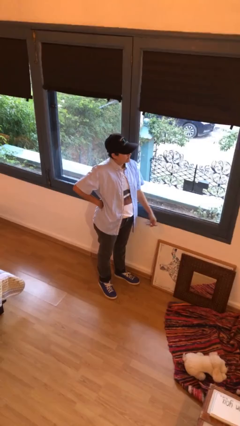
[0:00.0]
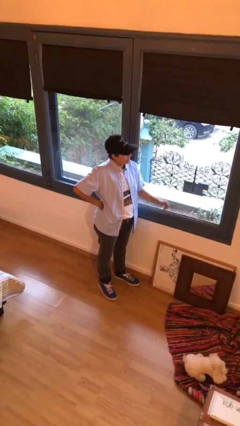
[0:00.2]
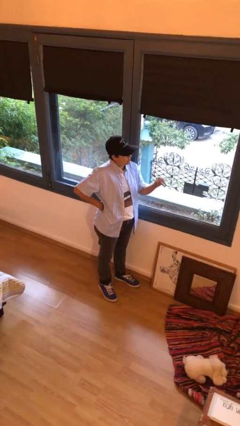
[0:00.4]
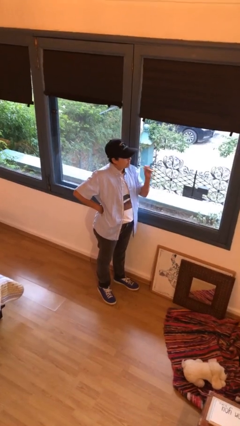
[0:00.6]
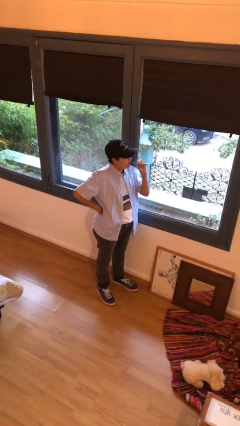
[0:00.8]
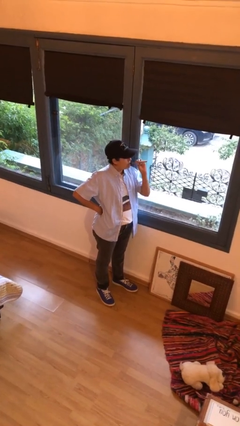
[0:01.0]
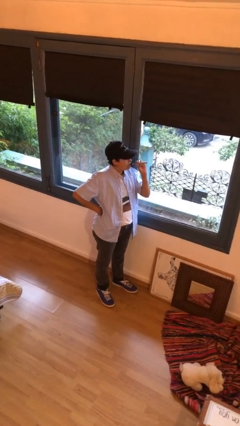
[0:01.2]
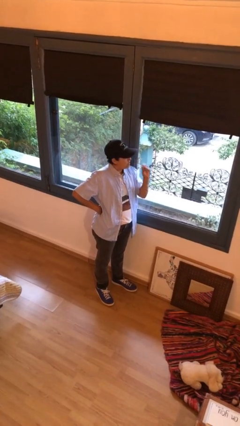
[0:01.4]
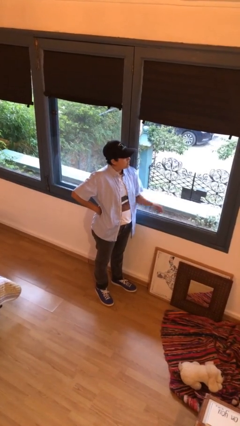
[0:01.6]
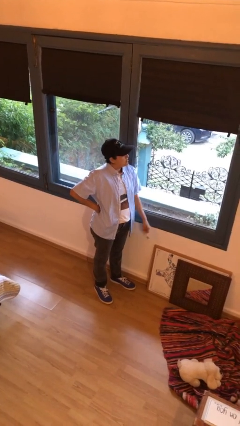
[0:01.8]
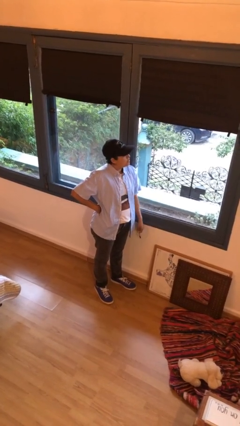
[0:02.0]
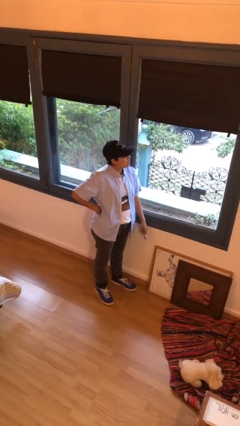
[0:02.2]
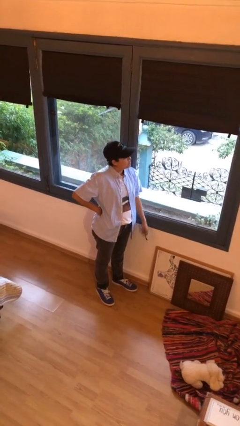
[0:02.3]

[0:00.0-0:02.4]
person vapes

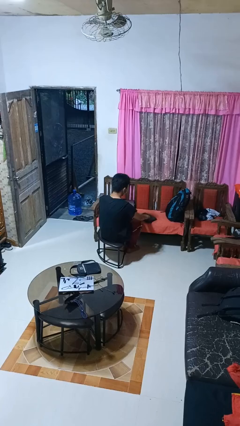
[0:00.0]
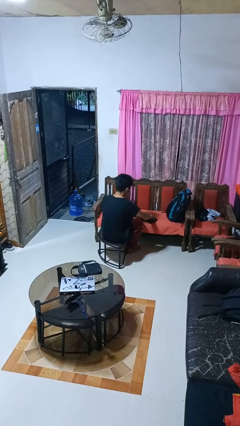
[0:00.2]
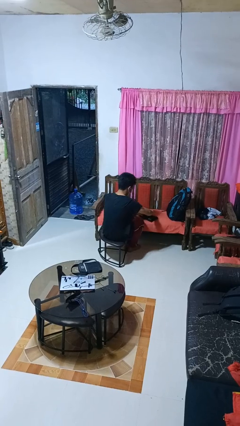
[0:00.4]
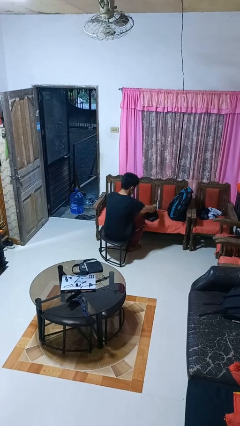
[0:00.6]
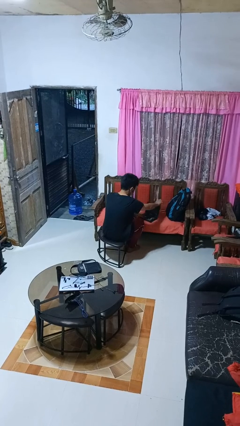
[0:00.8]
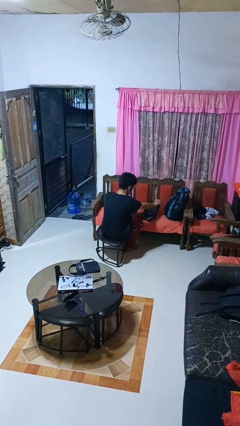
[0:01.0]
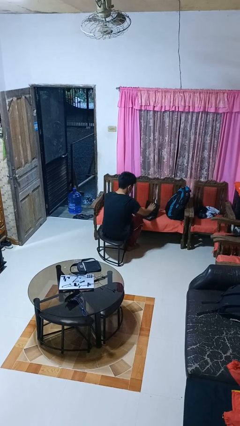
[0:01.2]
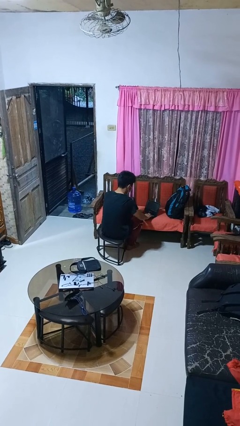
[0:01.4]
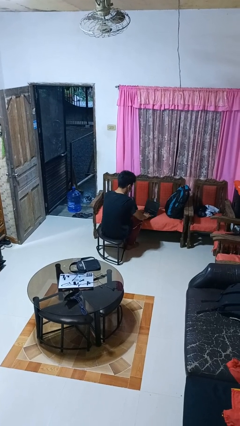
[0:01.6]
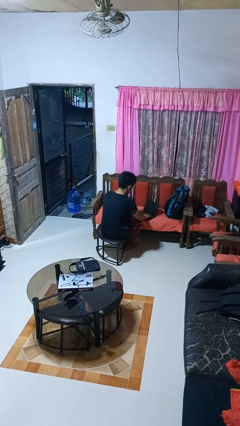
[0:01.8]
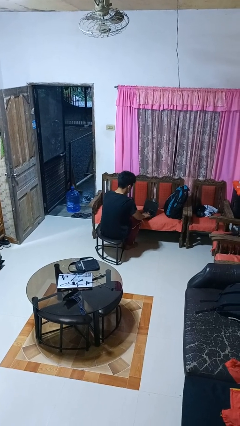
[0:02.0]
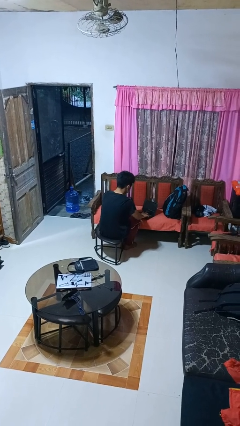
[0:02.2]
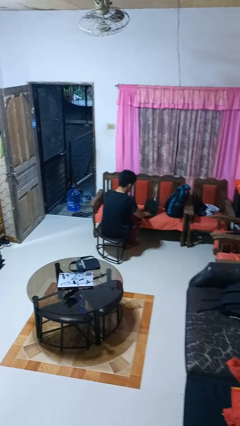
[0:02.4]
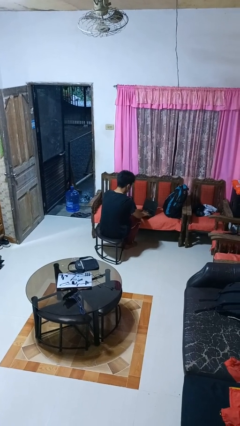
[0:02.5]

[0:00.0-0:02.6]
person opens laptop

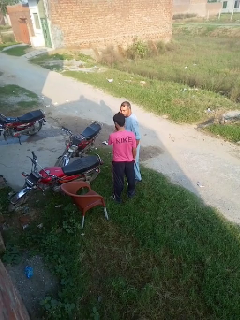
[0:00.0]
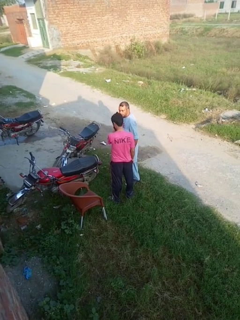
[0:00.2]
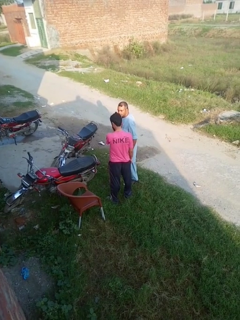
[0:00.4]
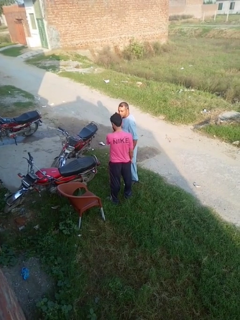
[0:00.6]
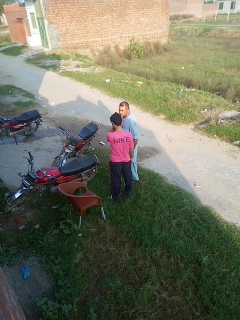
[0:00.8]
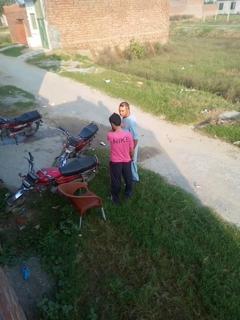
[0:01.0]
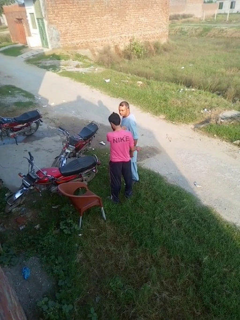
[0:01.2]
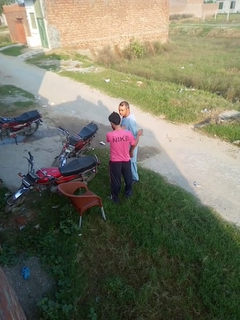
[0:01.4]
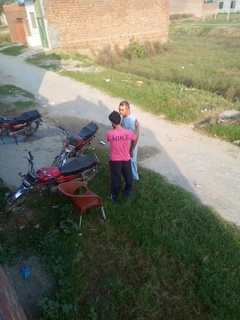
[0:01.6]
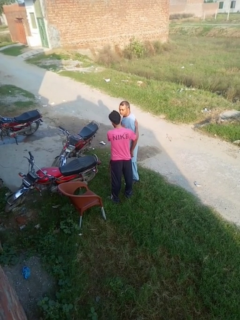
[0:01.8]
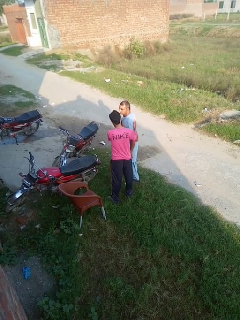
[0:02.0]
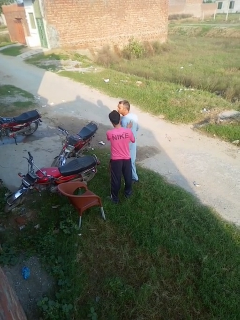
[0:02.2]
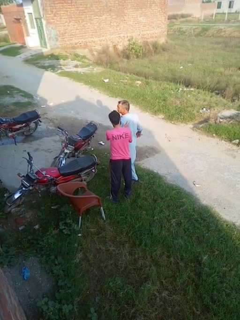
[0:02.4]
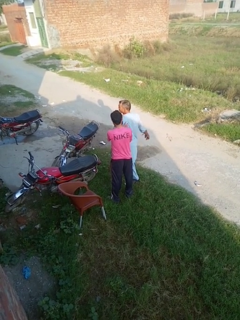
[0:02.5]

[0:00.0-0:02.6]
person grabs person by shoulder

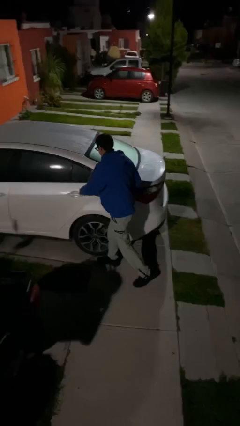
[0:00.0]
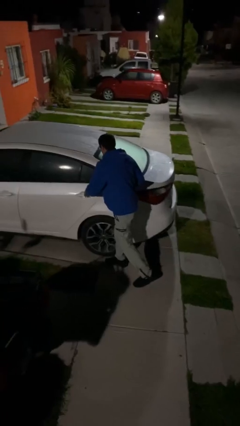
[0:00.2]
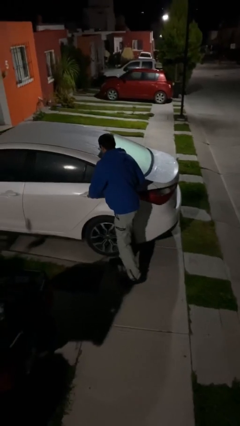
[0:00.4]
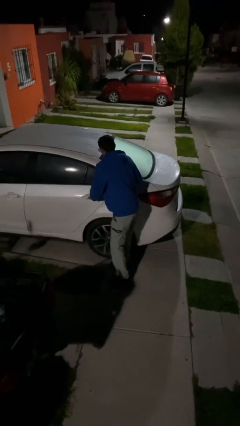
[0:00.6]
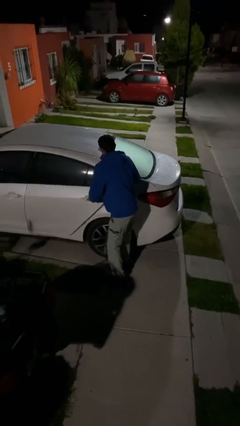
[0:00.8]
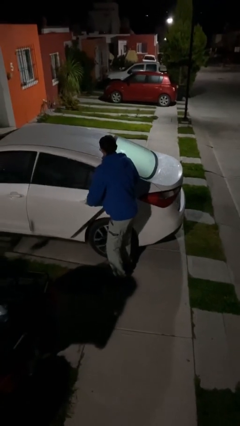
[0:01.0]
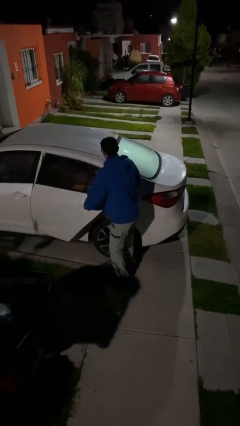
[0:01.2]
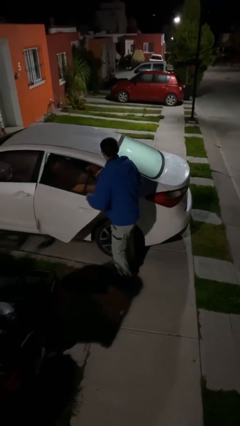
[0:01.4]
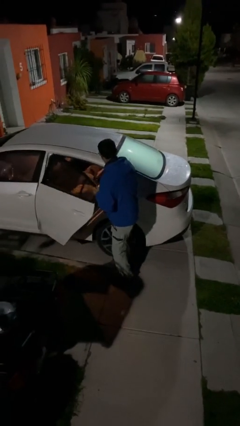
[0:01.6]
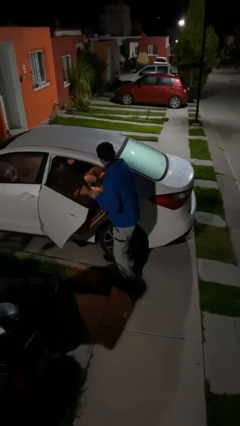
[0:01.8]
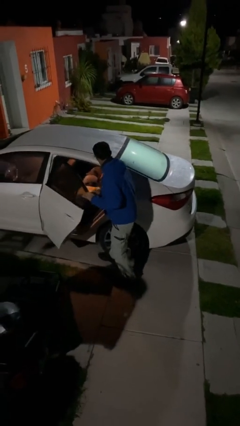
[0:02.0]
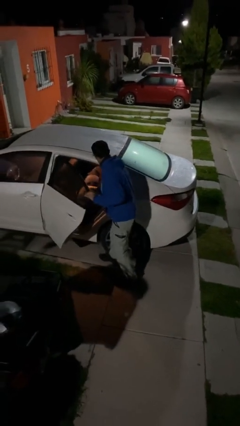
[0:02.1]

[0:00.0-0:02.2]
person opens car door

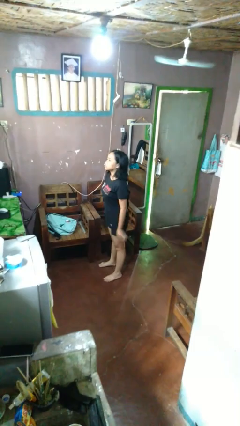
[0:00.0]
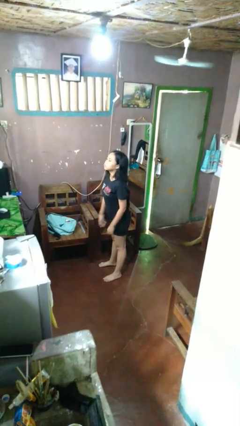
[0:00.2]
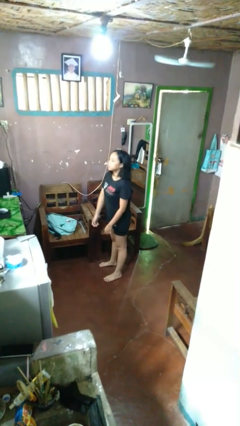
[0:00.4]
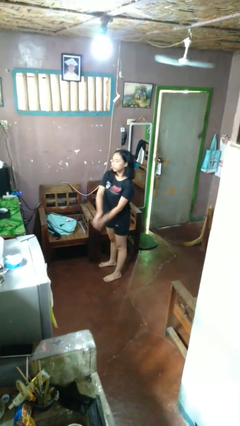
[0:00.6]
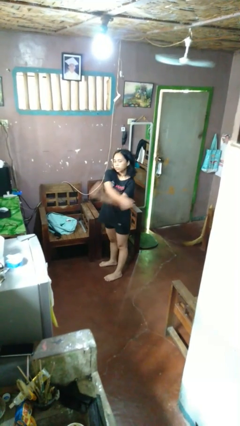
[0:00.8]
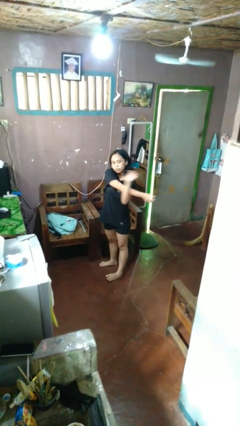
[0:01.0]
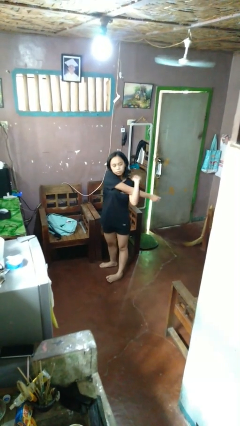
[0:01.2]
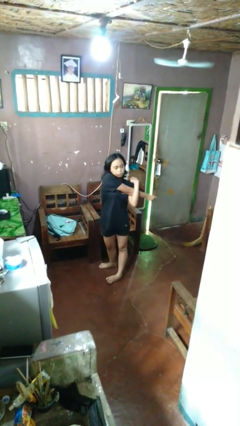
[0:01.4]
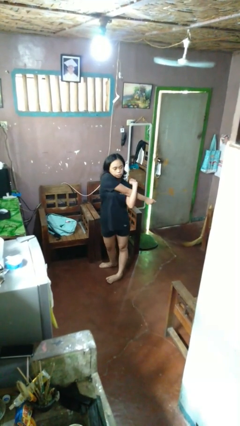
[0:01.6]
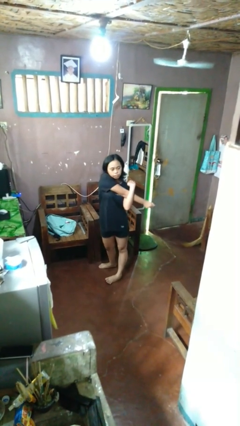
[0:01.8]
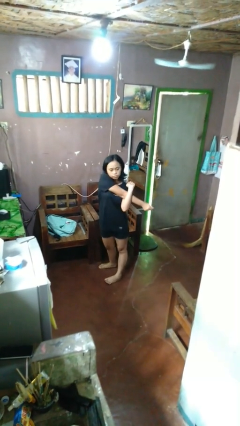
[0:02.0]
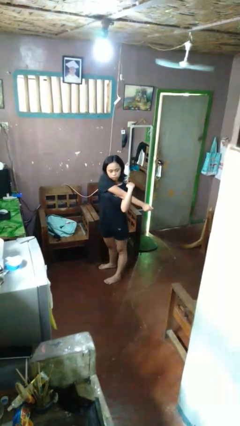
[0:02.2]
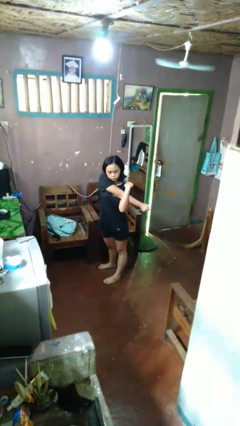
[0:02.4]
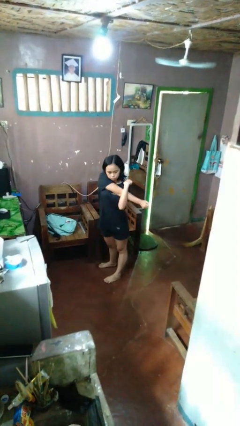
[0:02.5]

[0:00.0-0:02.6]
person stretches arms to side

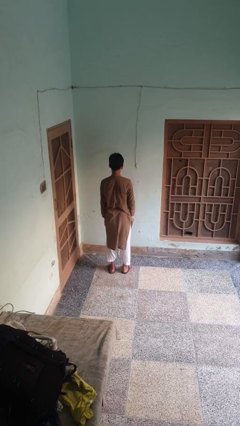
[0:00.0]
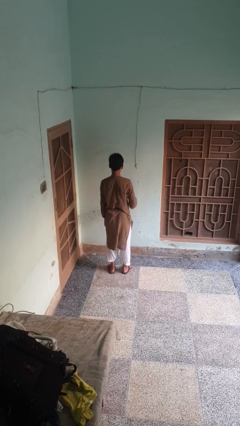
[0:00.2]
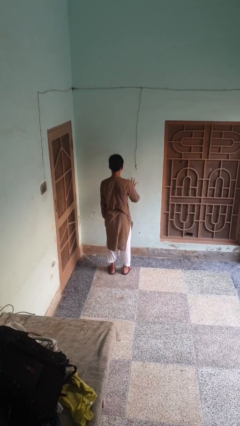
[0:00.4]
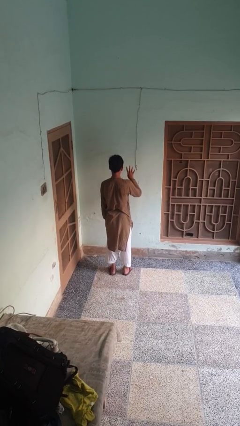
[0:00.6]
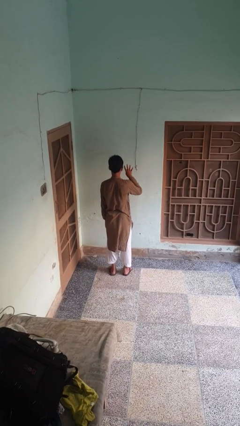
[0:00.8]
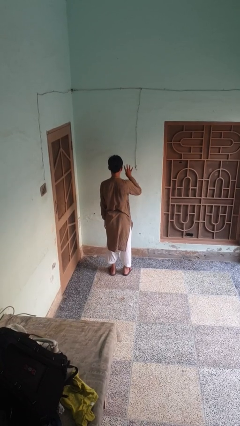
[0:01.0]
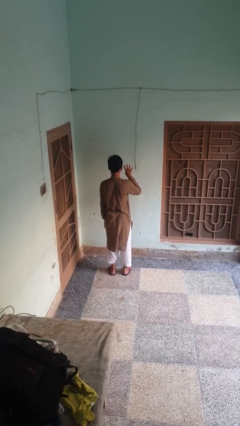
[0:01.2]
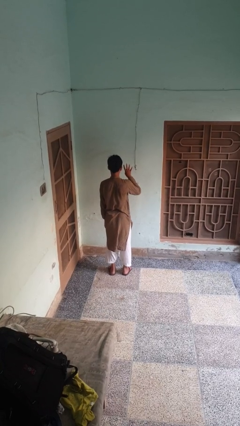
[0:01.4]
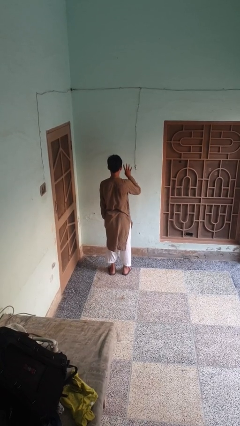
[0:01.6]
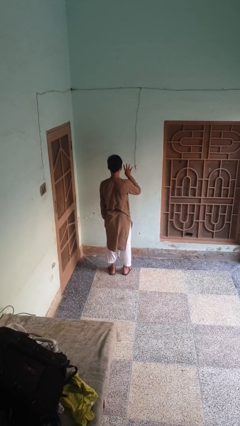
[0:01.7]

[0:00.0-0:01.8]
person gestures number four

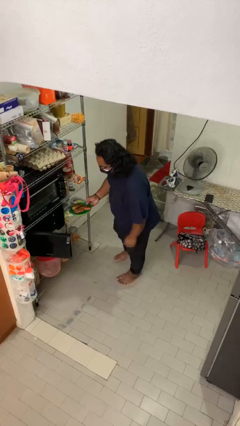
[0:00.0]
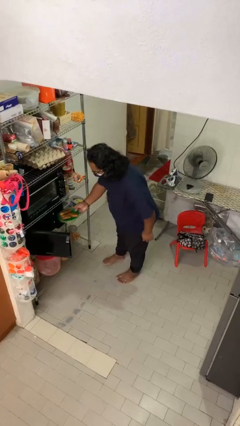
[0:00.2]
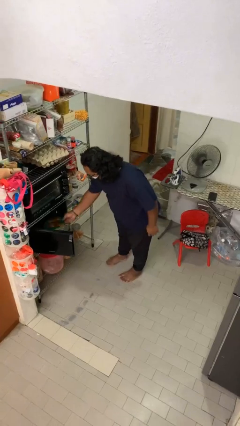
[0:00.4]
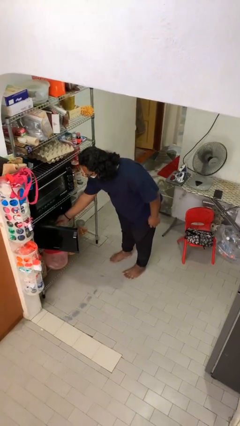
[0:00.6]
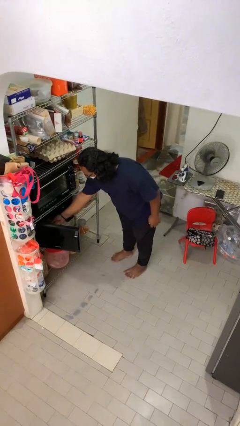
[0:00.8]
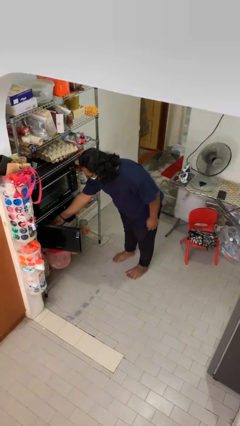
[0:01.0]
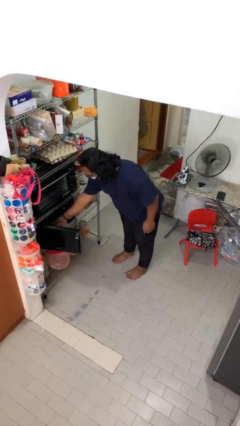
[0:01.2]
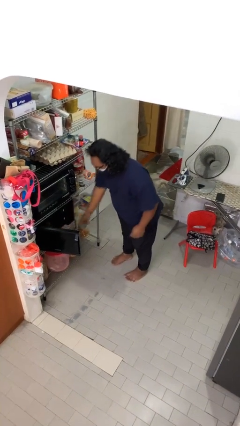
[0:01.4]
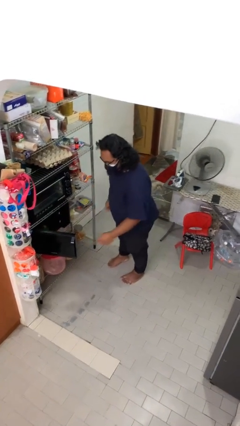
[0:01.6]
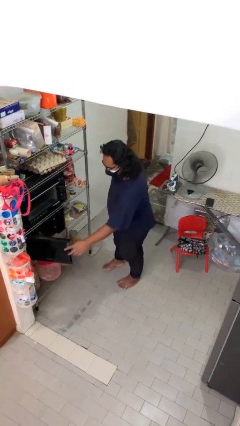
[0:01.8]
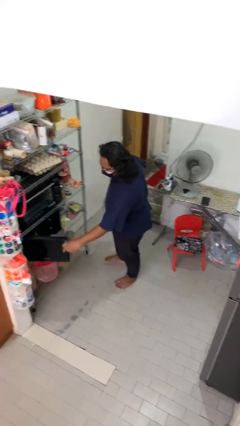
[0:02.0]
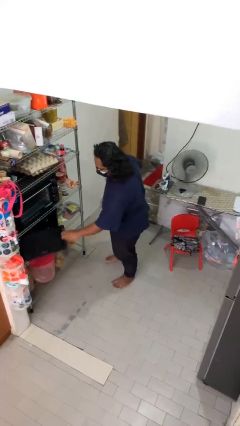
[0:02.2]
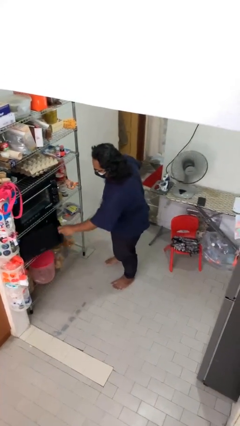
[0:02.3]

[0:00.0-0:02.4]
person puts object into microwave

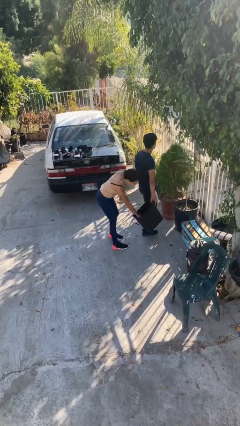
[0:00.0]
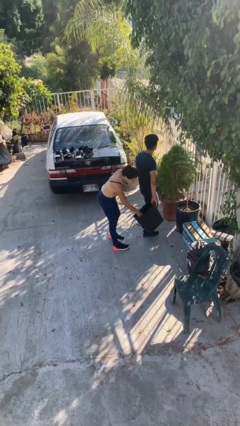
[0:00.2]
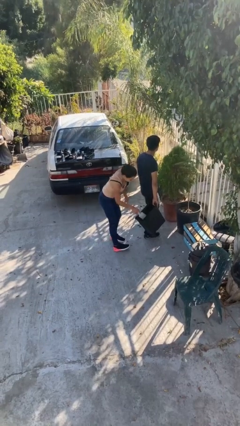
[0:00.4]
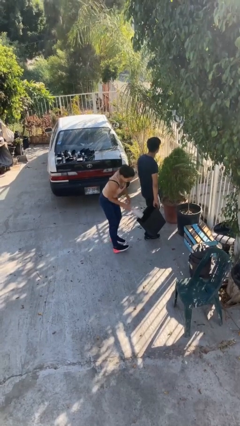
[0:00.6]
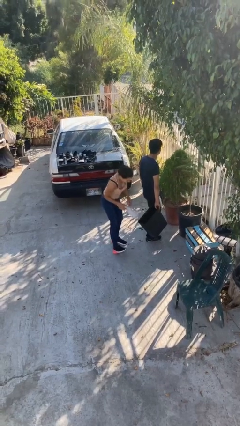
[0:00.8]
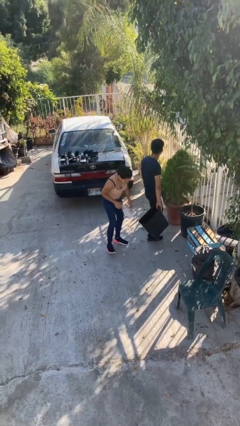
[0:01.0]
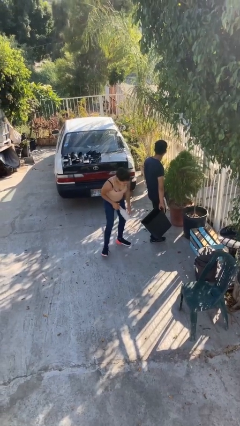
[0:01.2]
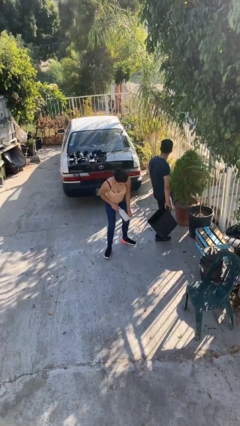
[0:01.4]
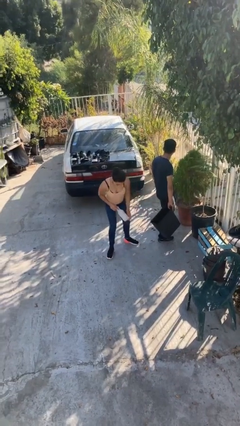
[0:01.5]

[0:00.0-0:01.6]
person steals object from person
